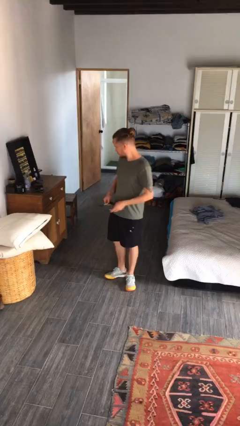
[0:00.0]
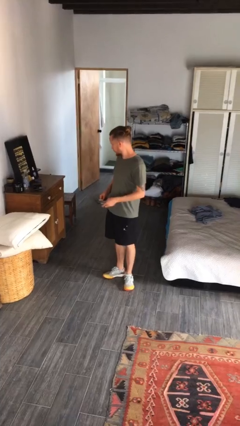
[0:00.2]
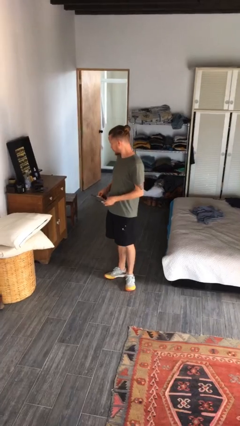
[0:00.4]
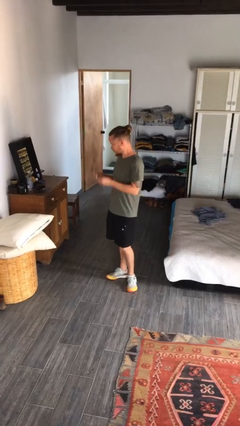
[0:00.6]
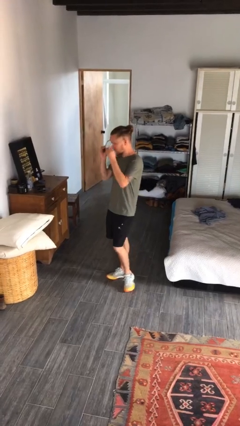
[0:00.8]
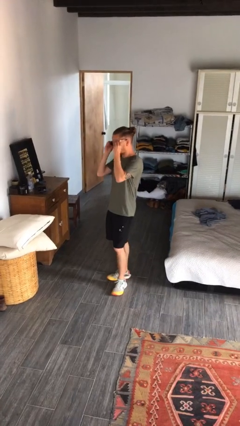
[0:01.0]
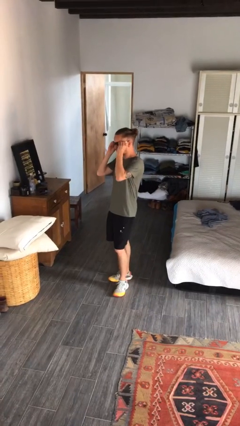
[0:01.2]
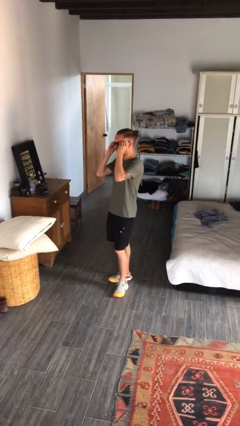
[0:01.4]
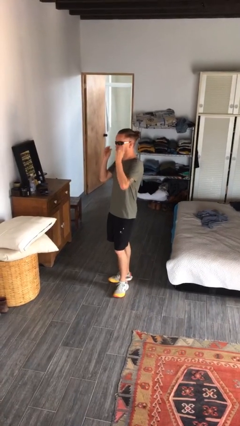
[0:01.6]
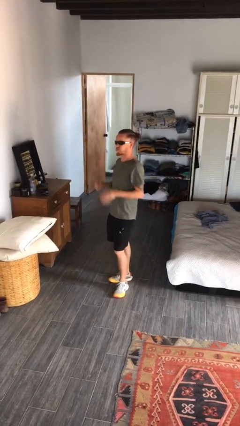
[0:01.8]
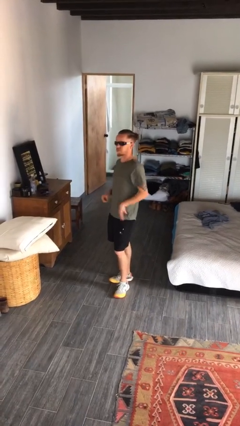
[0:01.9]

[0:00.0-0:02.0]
person puts on sunglasses

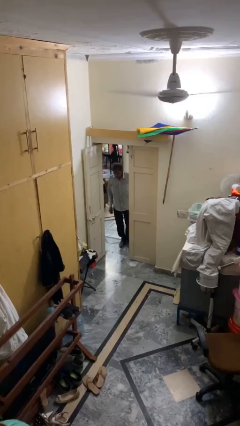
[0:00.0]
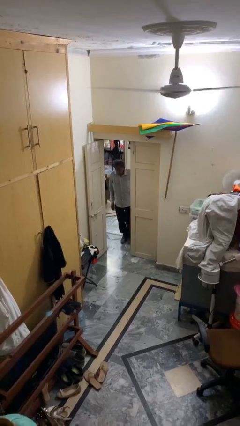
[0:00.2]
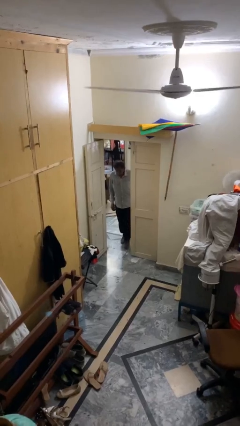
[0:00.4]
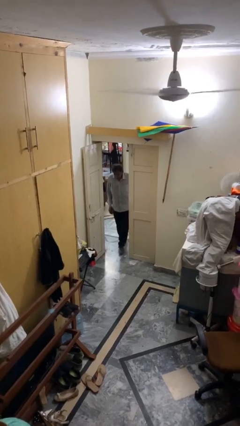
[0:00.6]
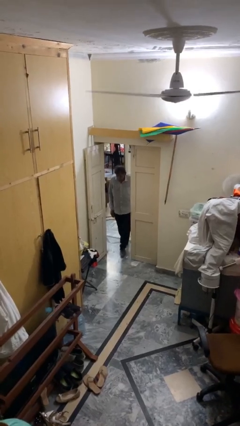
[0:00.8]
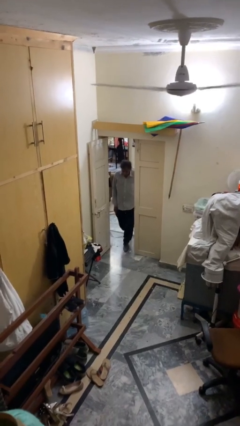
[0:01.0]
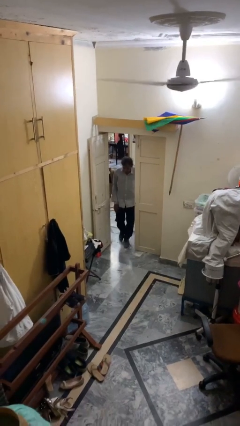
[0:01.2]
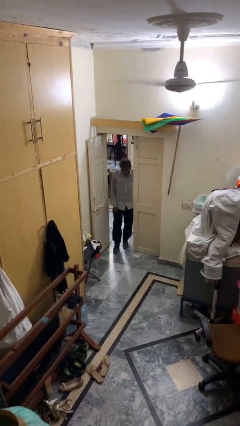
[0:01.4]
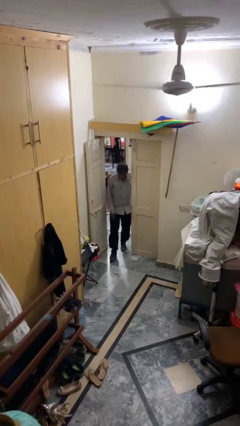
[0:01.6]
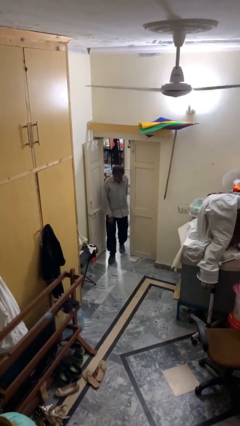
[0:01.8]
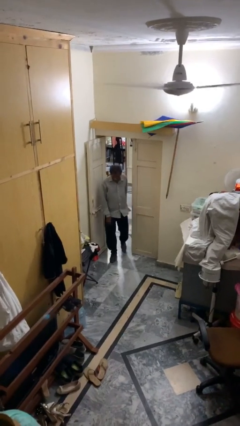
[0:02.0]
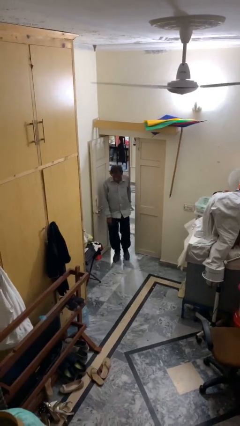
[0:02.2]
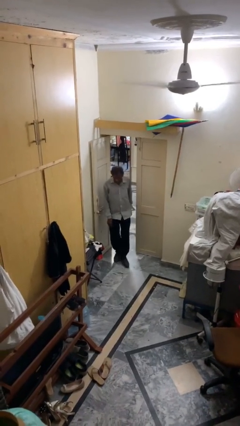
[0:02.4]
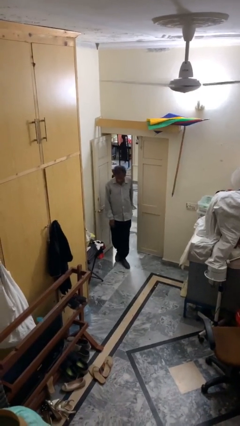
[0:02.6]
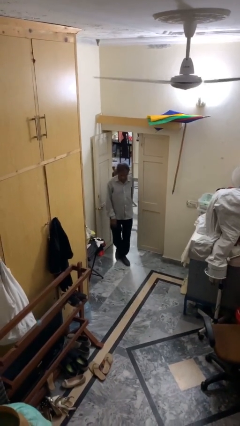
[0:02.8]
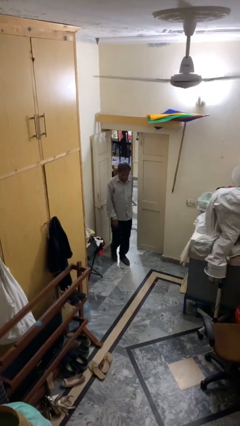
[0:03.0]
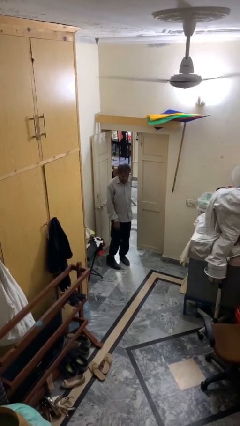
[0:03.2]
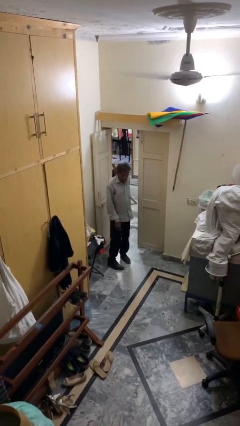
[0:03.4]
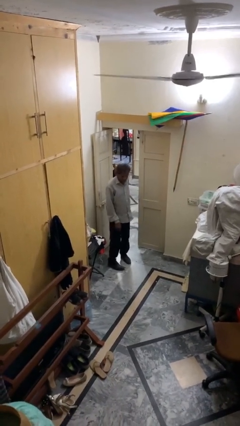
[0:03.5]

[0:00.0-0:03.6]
person enters scene through structure

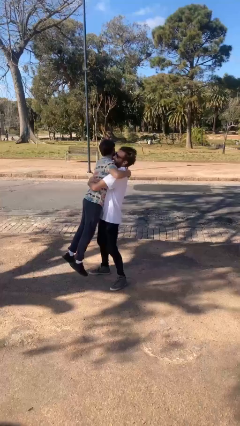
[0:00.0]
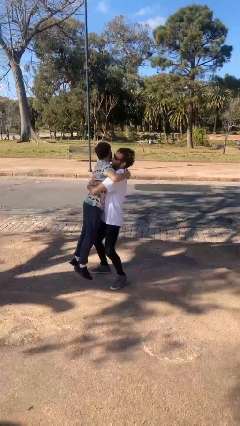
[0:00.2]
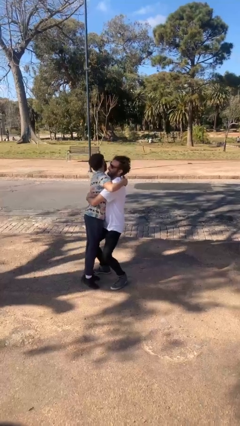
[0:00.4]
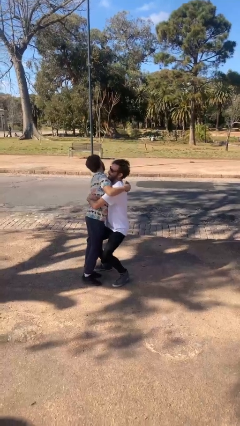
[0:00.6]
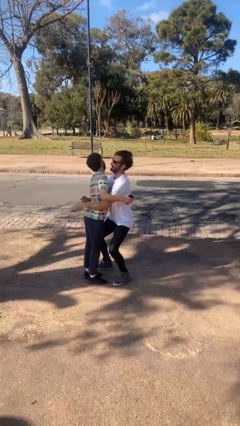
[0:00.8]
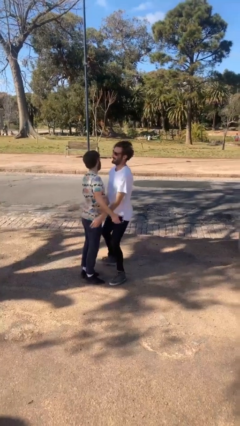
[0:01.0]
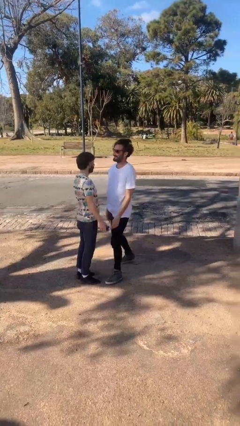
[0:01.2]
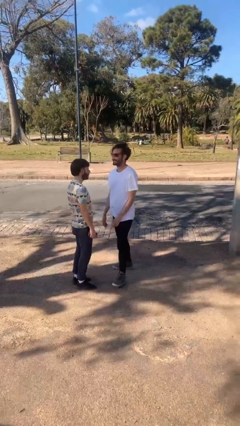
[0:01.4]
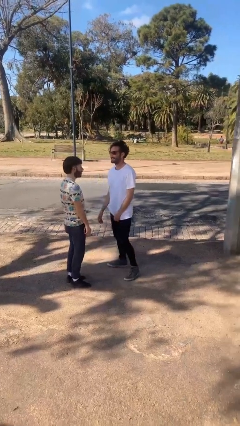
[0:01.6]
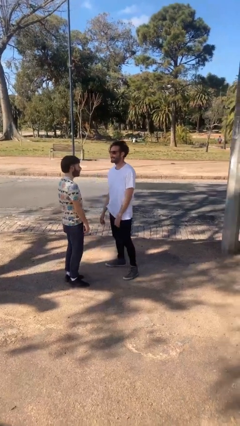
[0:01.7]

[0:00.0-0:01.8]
person puts down person

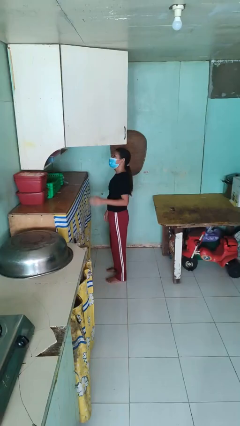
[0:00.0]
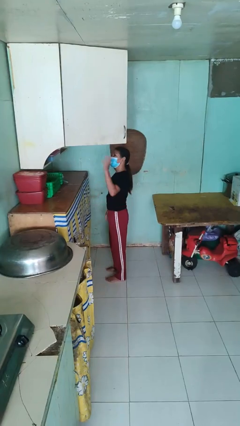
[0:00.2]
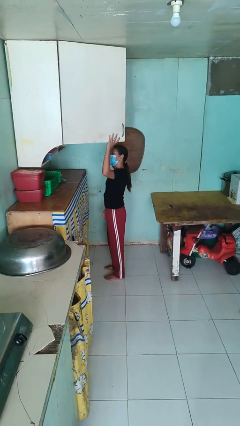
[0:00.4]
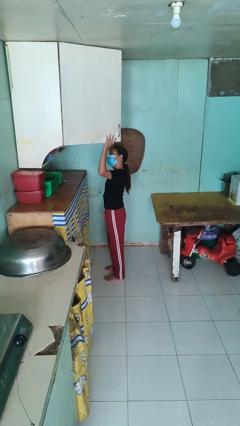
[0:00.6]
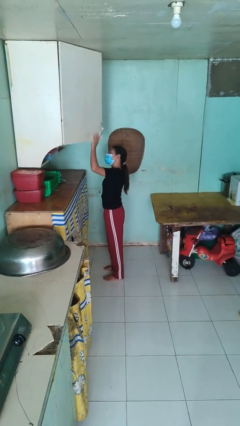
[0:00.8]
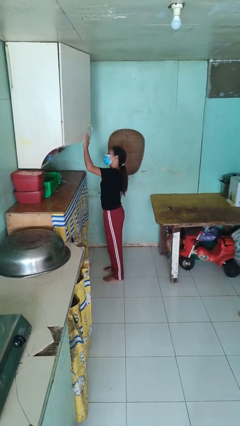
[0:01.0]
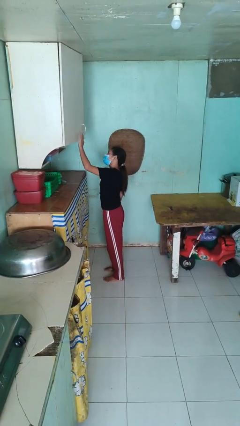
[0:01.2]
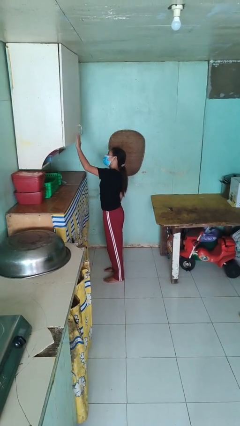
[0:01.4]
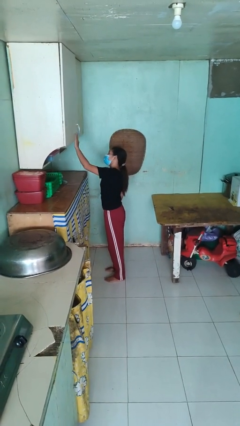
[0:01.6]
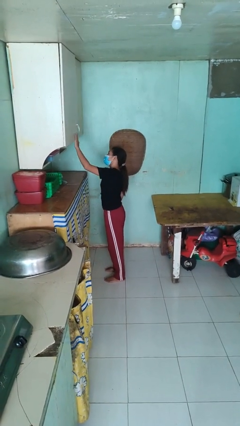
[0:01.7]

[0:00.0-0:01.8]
person closes cabinet

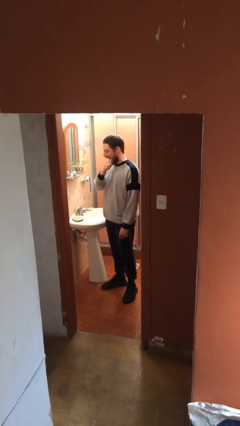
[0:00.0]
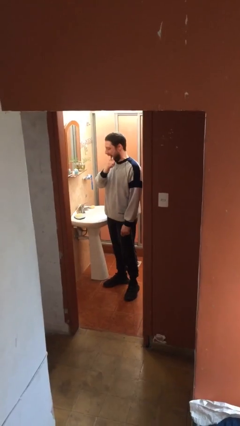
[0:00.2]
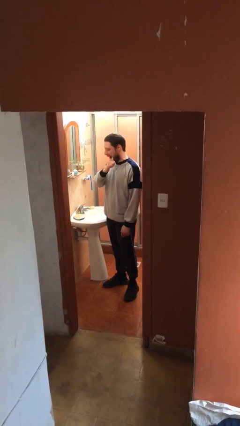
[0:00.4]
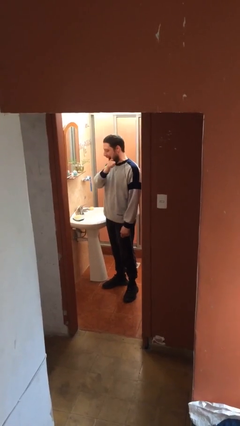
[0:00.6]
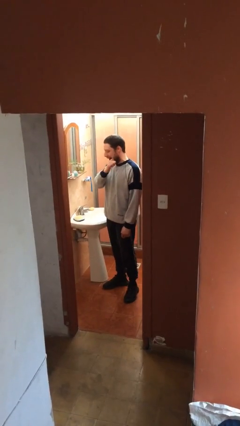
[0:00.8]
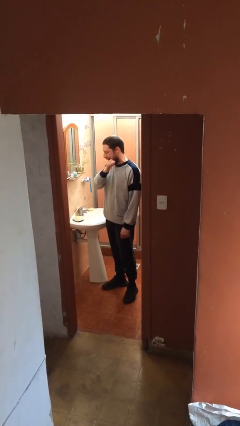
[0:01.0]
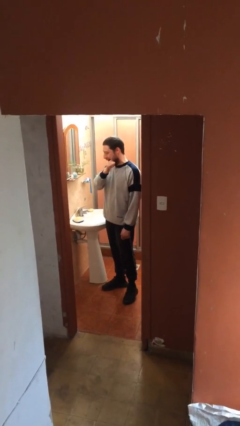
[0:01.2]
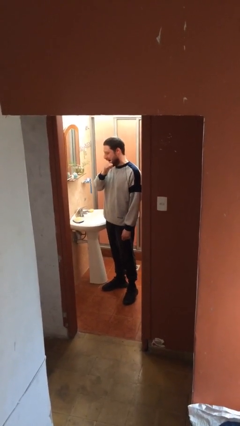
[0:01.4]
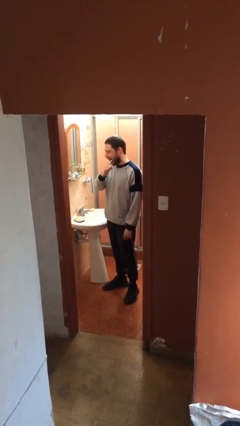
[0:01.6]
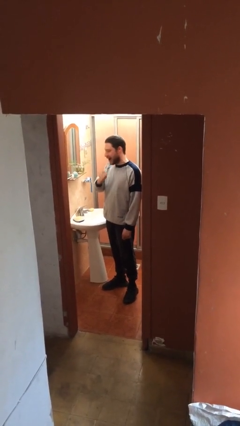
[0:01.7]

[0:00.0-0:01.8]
person brushes teeth

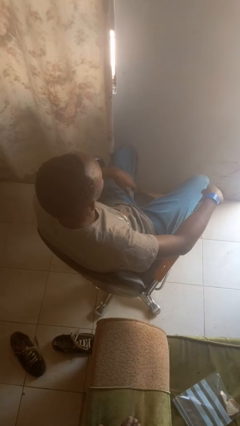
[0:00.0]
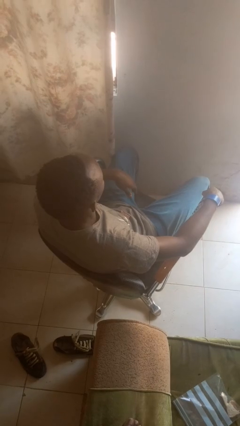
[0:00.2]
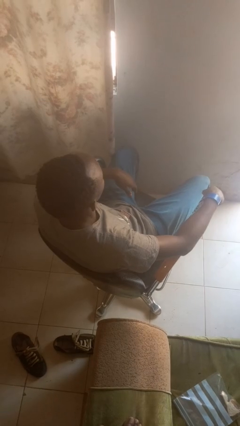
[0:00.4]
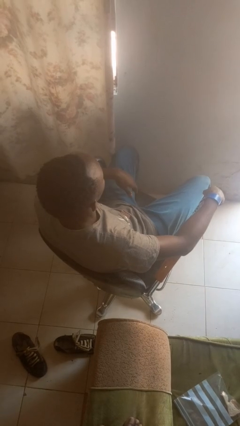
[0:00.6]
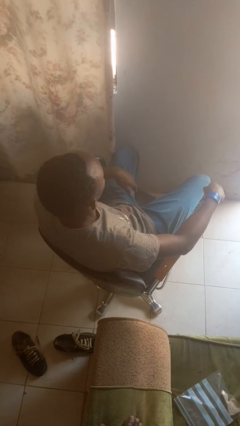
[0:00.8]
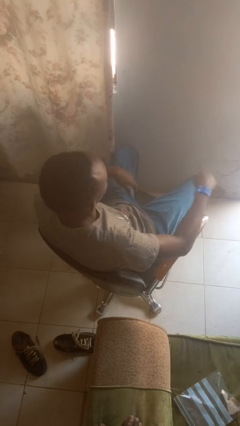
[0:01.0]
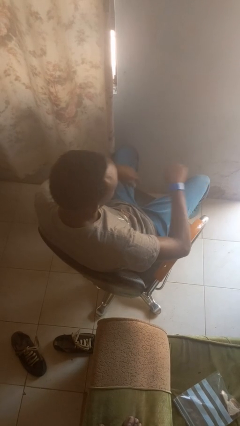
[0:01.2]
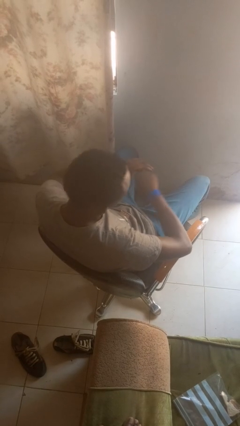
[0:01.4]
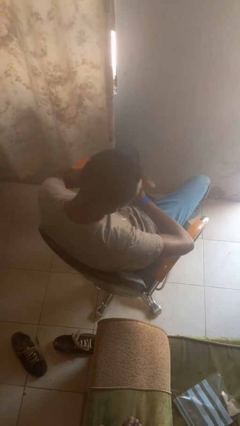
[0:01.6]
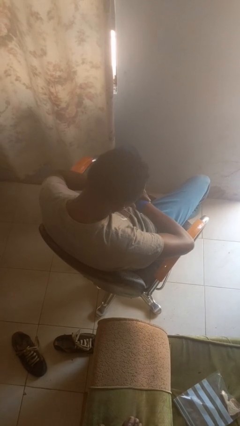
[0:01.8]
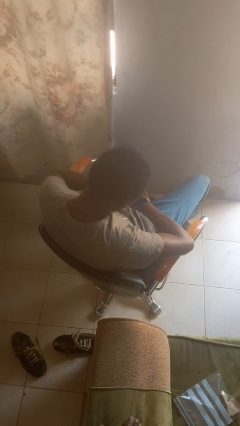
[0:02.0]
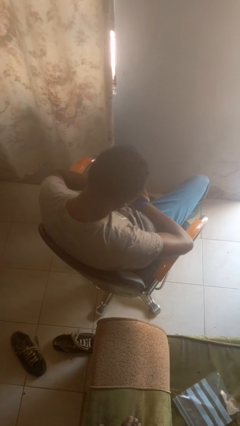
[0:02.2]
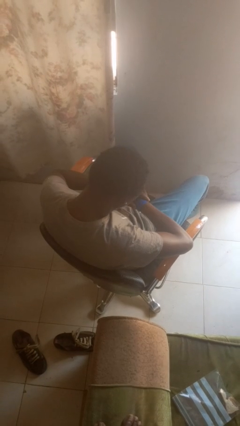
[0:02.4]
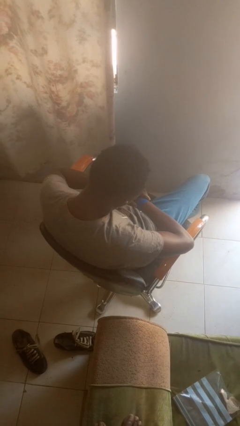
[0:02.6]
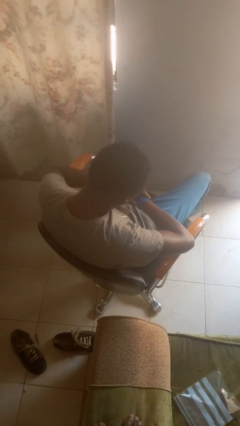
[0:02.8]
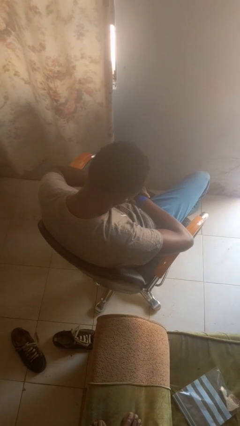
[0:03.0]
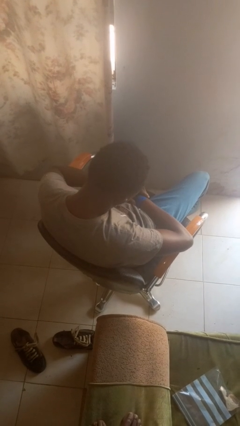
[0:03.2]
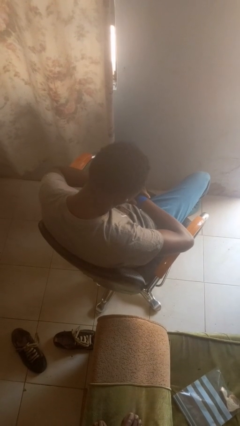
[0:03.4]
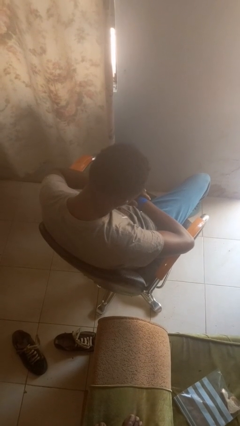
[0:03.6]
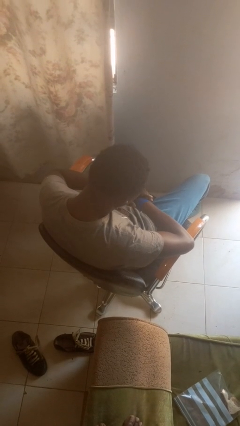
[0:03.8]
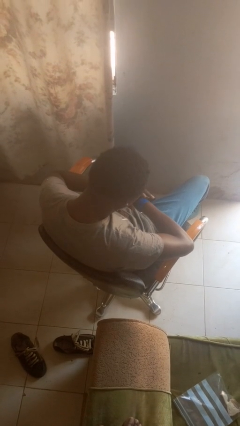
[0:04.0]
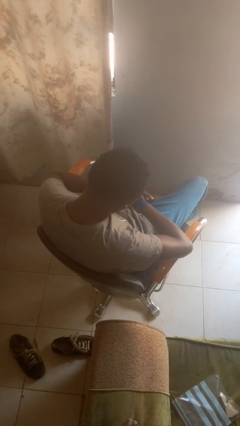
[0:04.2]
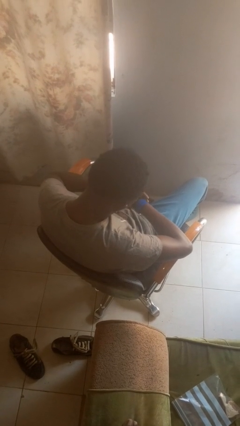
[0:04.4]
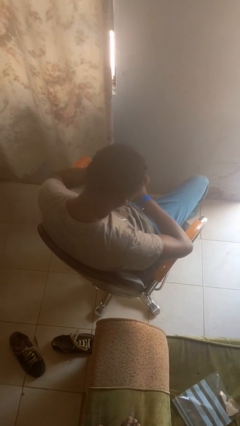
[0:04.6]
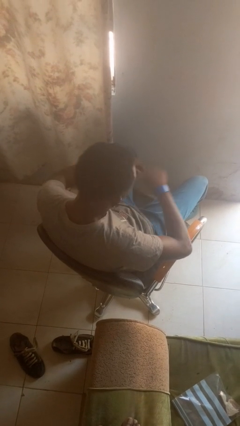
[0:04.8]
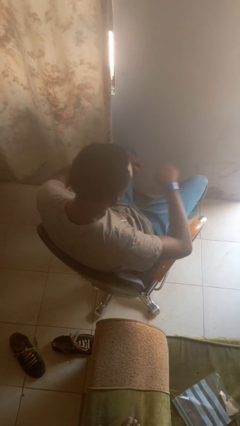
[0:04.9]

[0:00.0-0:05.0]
person looks at wristwatch

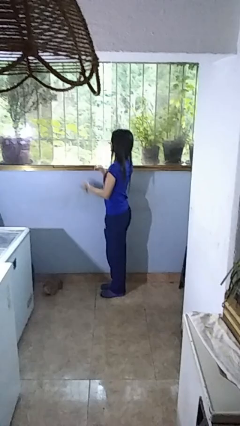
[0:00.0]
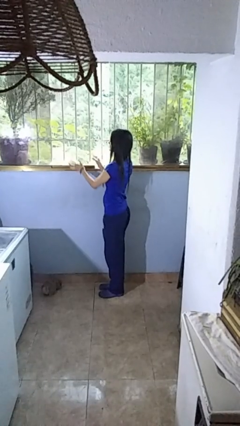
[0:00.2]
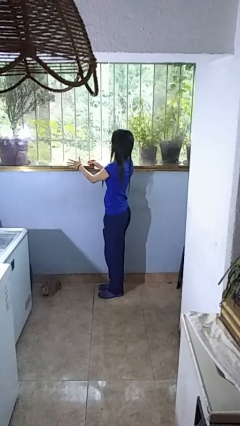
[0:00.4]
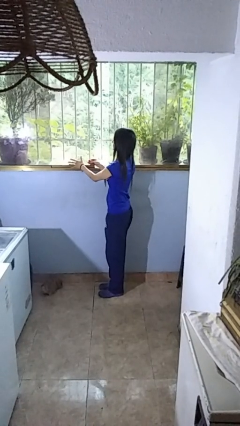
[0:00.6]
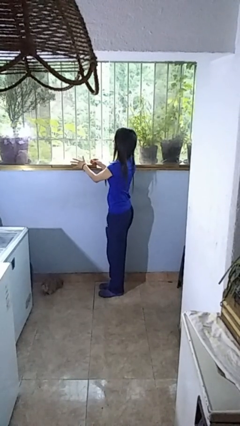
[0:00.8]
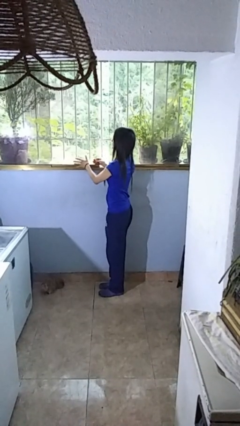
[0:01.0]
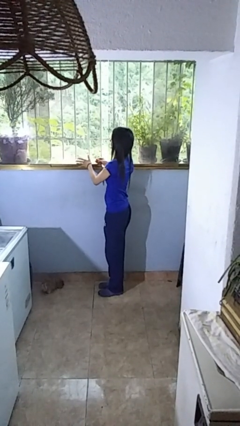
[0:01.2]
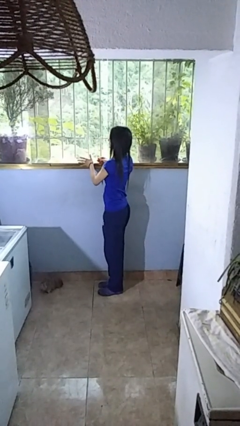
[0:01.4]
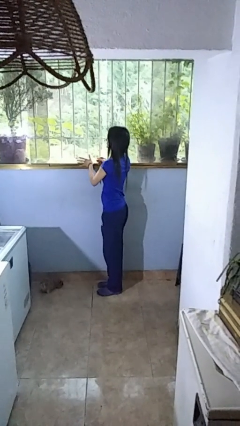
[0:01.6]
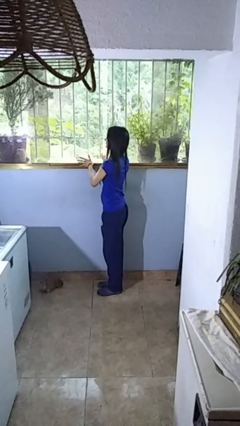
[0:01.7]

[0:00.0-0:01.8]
person closes home window
